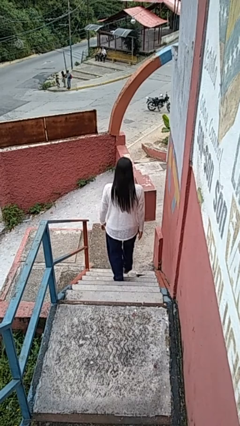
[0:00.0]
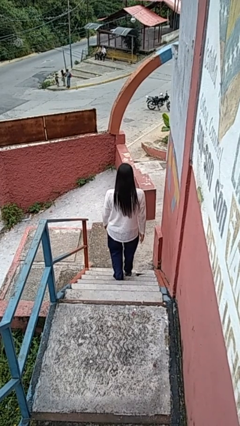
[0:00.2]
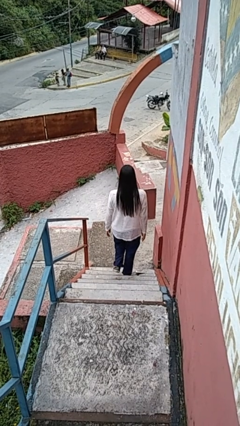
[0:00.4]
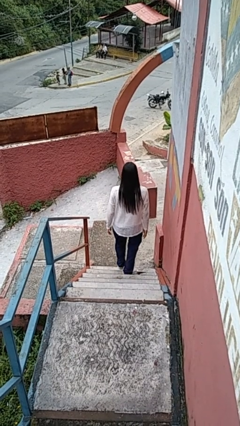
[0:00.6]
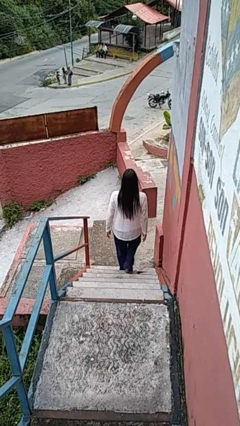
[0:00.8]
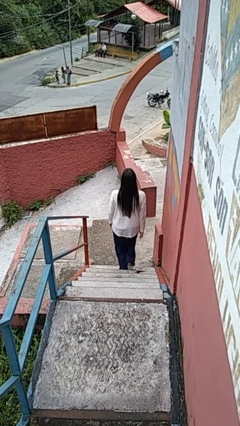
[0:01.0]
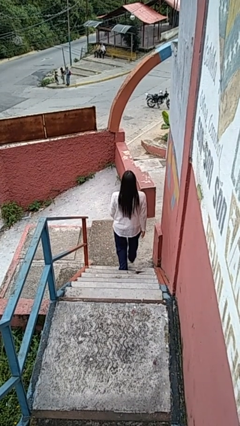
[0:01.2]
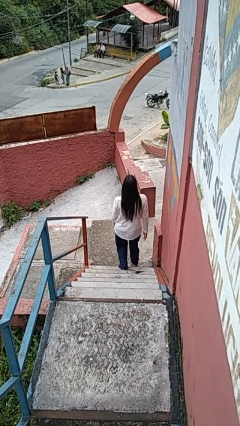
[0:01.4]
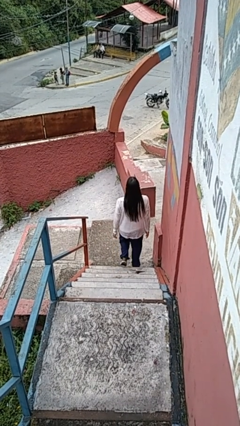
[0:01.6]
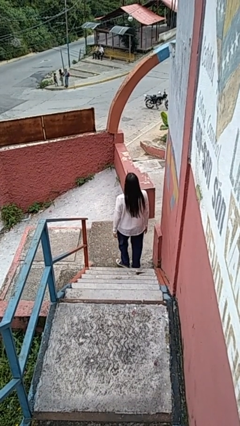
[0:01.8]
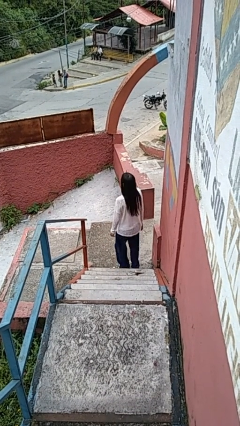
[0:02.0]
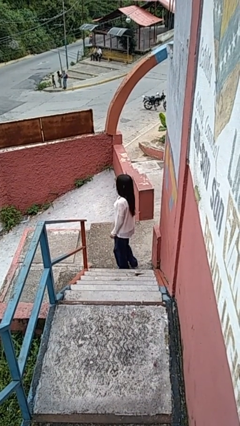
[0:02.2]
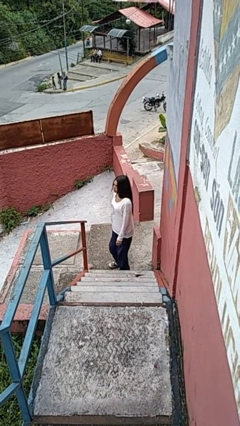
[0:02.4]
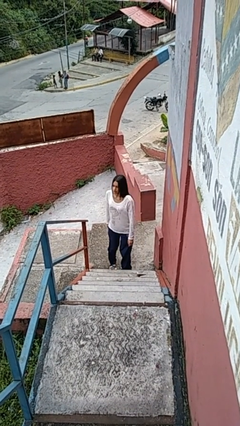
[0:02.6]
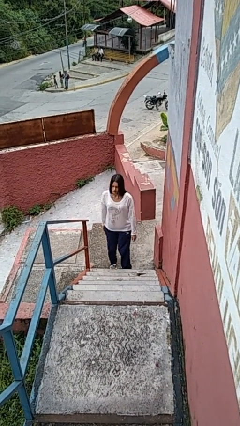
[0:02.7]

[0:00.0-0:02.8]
person climbs down stairs

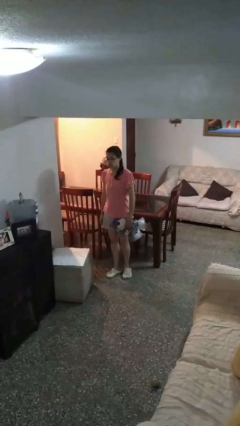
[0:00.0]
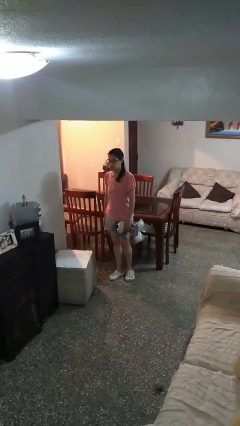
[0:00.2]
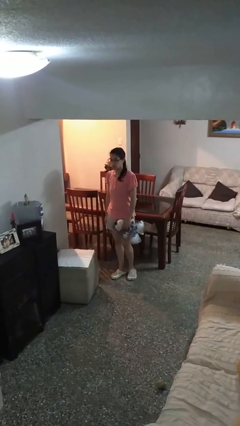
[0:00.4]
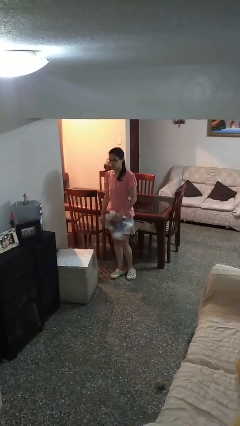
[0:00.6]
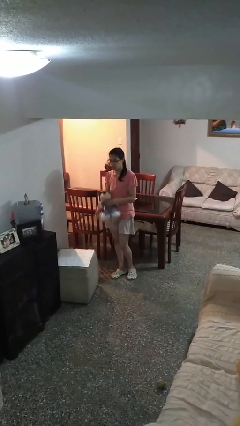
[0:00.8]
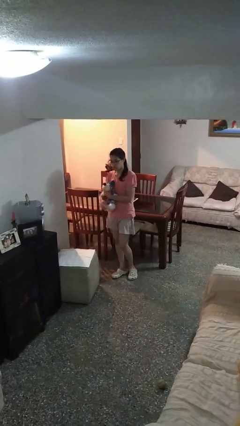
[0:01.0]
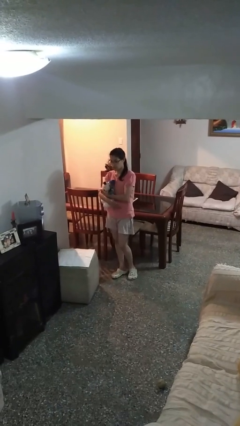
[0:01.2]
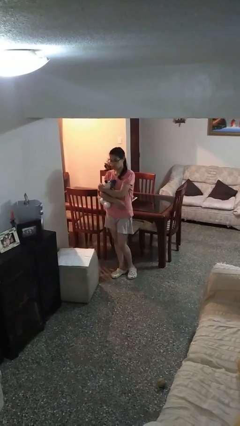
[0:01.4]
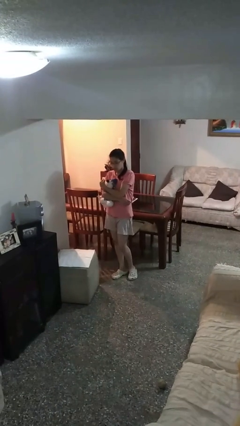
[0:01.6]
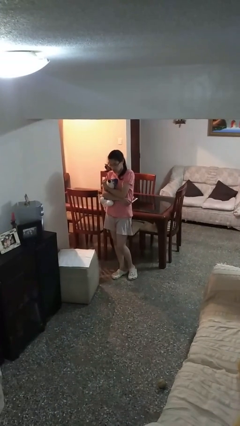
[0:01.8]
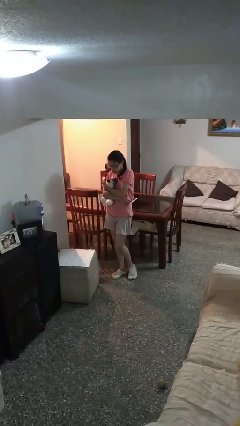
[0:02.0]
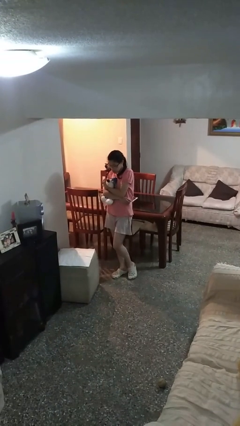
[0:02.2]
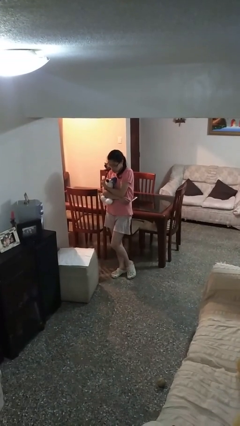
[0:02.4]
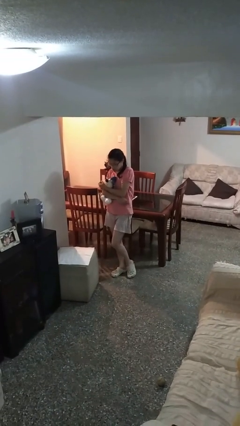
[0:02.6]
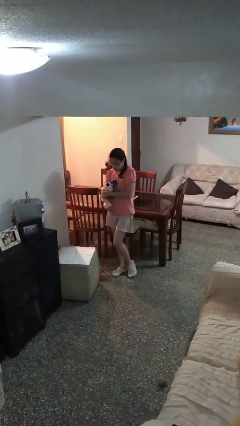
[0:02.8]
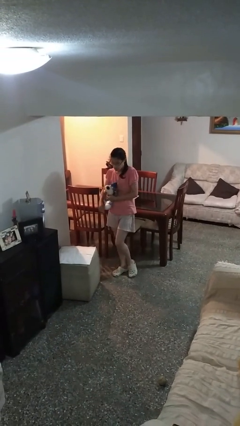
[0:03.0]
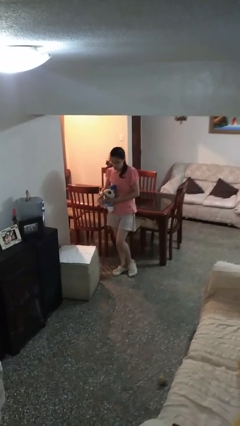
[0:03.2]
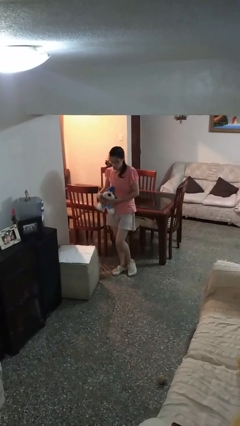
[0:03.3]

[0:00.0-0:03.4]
person hugs stuffed animal

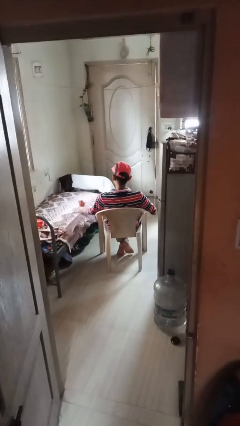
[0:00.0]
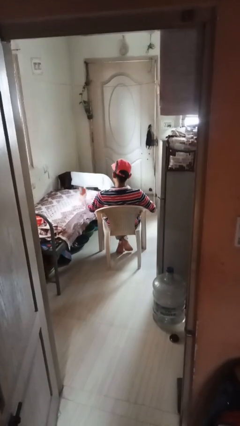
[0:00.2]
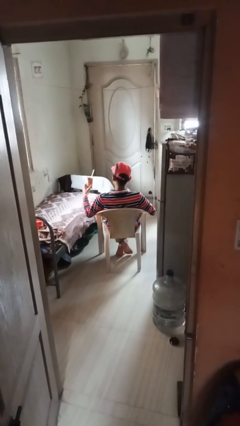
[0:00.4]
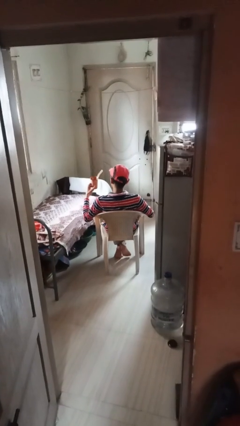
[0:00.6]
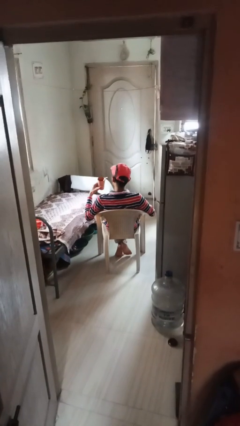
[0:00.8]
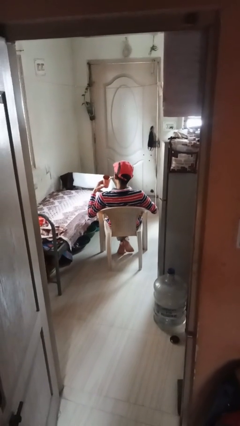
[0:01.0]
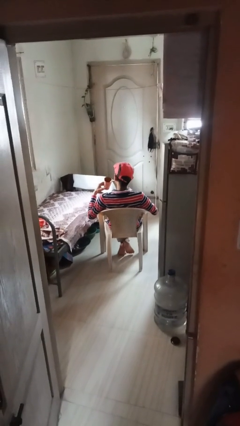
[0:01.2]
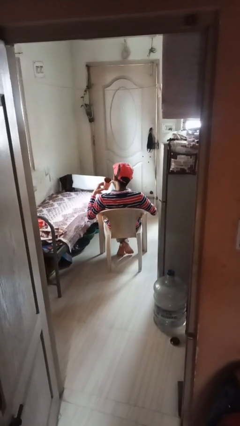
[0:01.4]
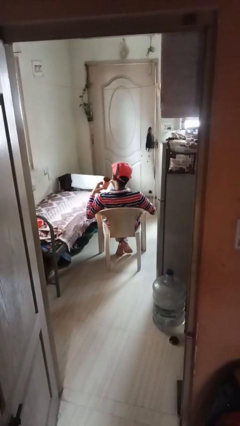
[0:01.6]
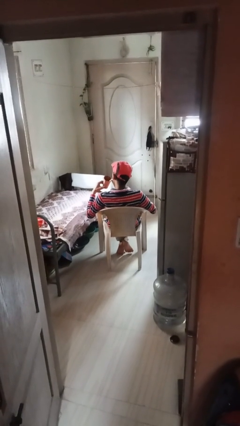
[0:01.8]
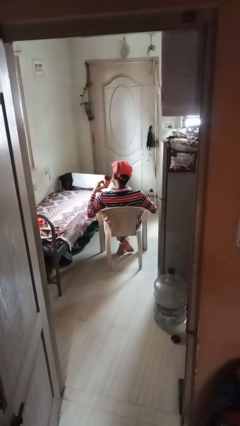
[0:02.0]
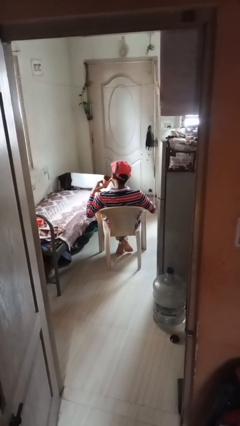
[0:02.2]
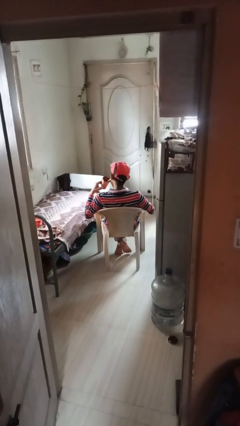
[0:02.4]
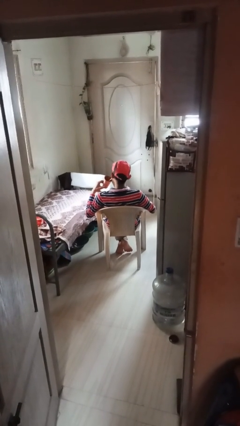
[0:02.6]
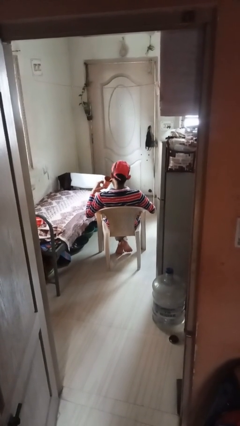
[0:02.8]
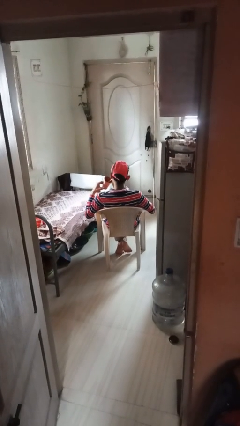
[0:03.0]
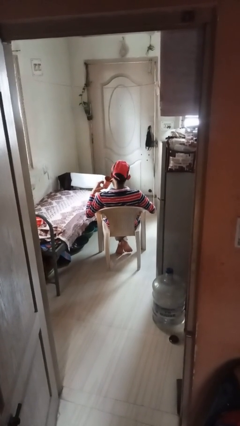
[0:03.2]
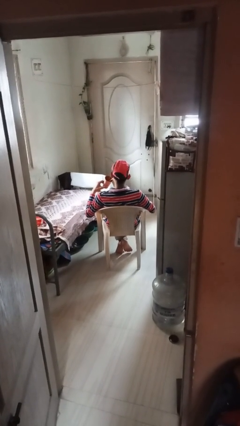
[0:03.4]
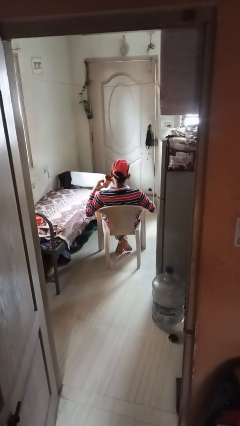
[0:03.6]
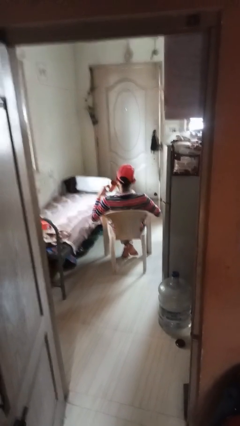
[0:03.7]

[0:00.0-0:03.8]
person drinks from straw

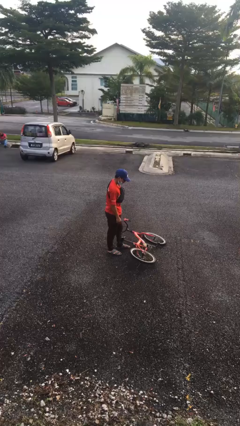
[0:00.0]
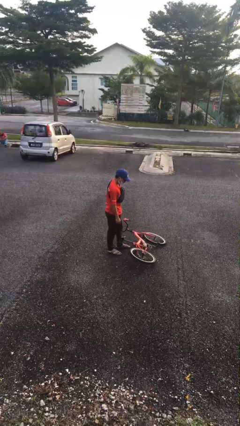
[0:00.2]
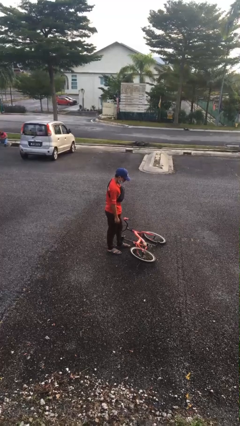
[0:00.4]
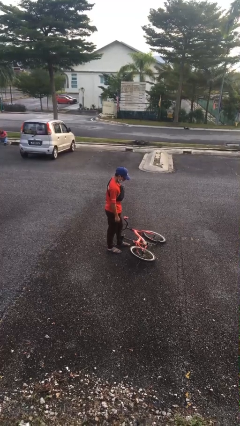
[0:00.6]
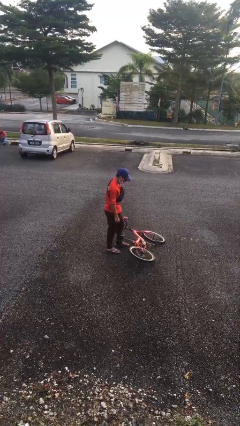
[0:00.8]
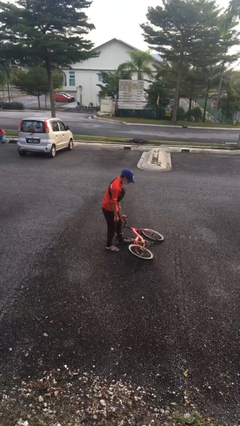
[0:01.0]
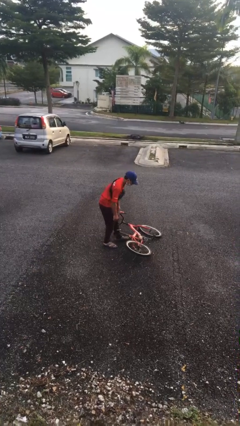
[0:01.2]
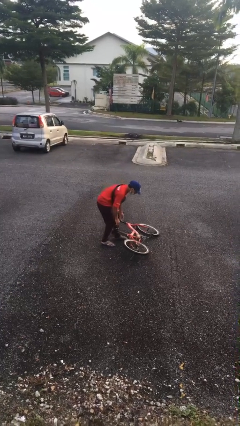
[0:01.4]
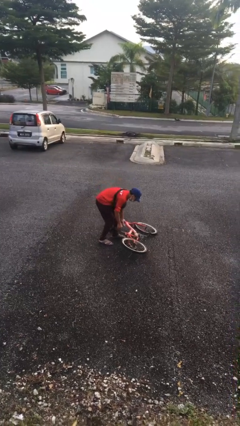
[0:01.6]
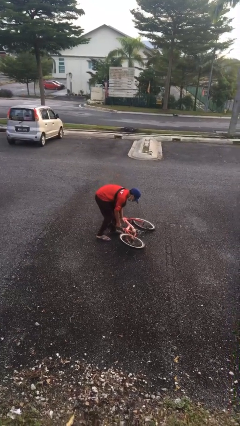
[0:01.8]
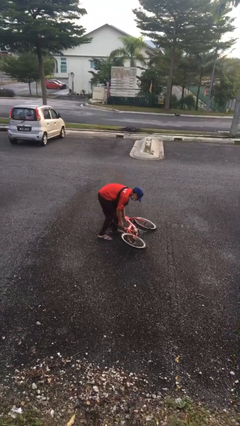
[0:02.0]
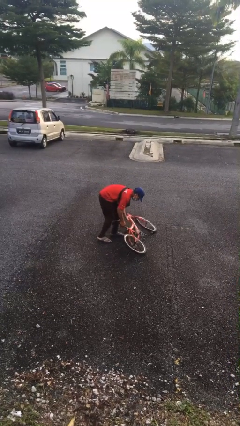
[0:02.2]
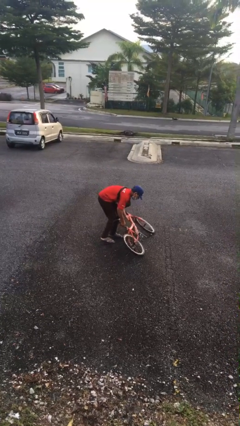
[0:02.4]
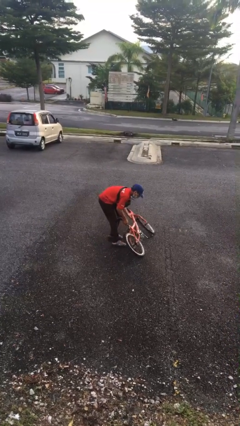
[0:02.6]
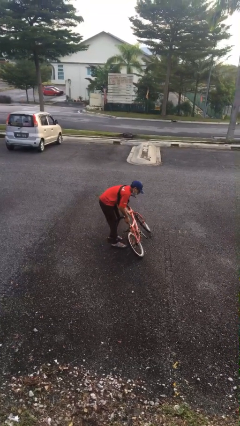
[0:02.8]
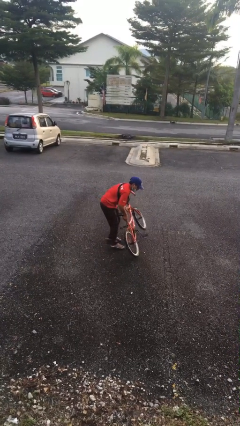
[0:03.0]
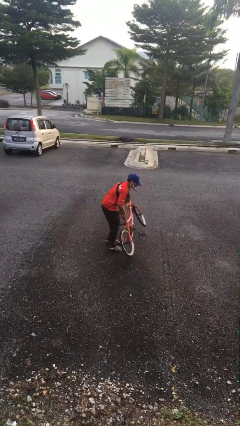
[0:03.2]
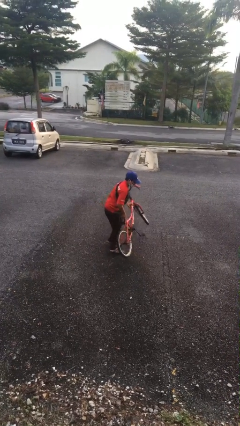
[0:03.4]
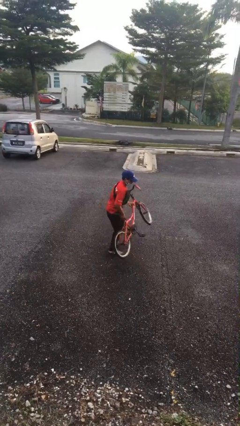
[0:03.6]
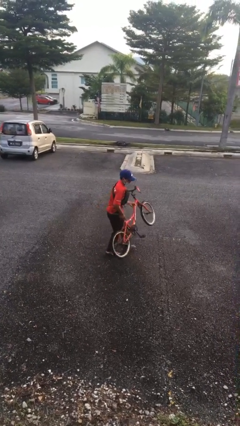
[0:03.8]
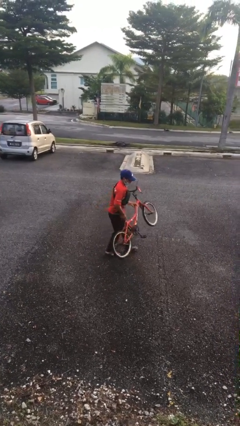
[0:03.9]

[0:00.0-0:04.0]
person picks up object from floor

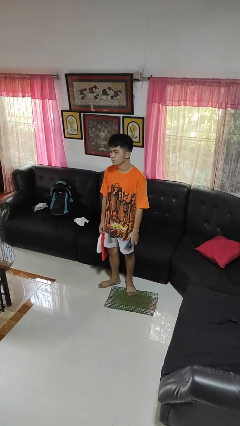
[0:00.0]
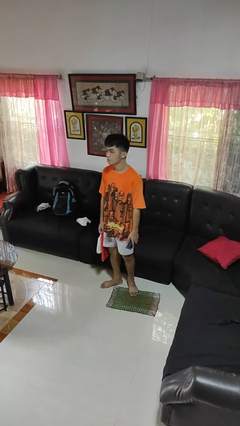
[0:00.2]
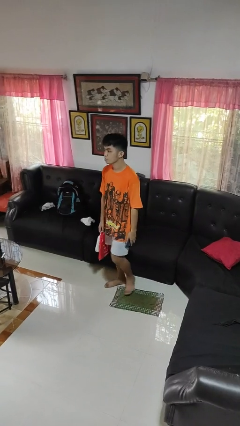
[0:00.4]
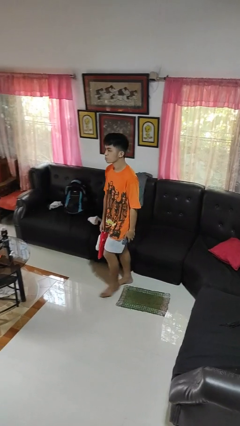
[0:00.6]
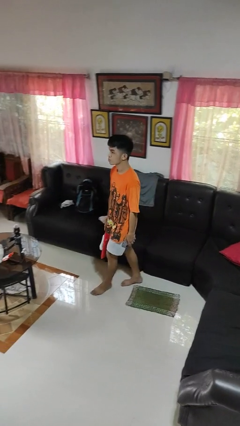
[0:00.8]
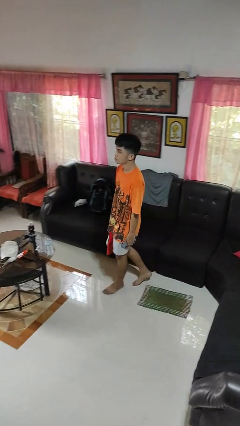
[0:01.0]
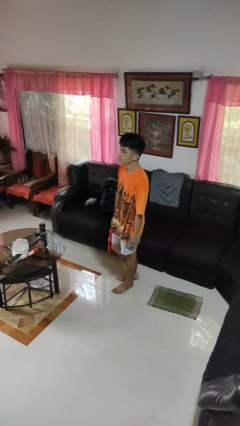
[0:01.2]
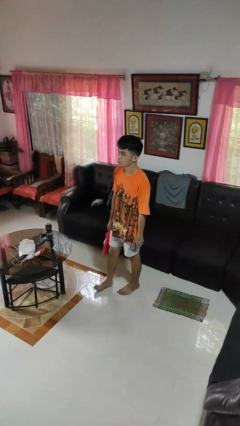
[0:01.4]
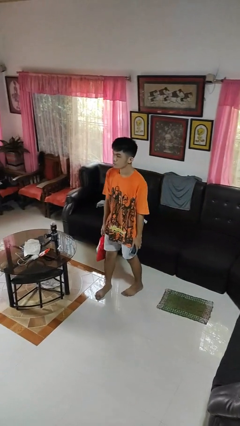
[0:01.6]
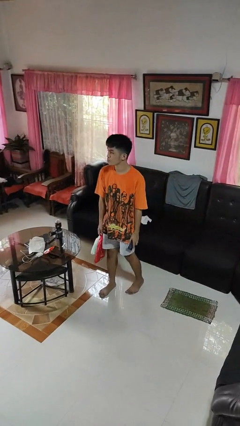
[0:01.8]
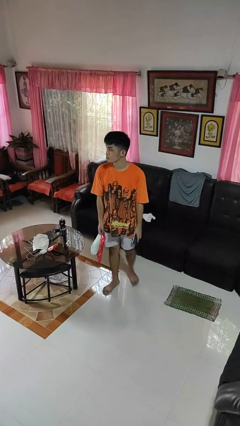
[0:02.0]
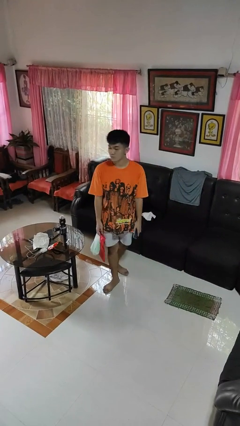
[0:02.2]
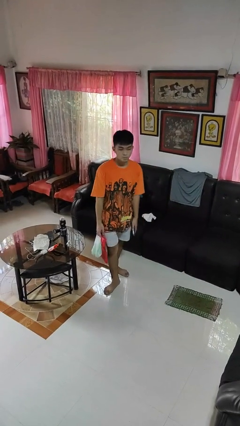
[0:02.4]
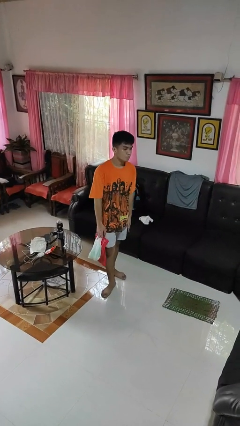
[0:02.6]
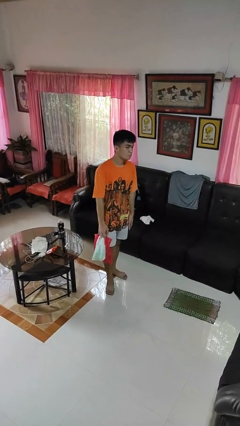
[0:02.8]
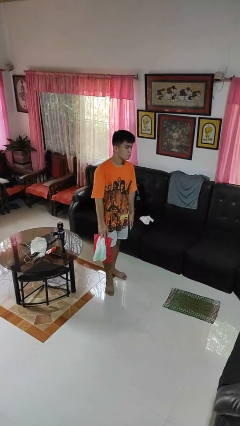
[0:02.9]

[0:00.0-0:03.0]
person carries groceries

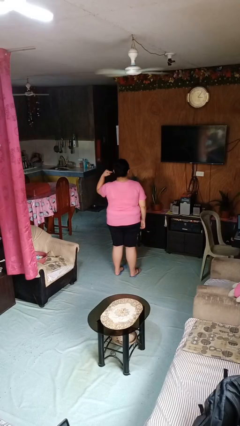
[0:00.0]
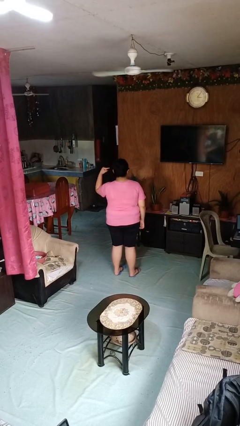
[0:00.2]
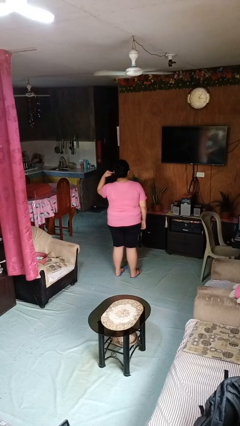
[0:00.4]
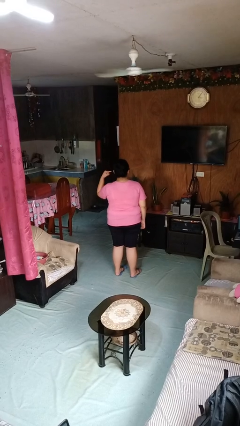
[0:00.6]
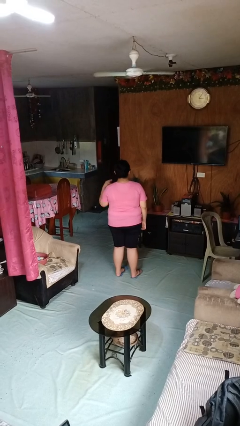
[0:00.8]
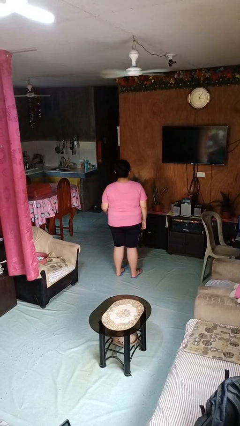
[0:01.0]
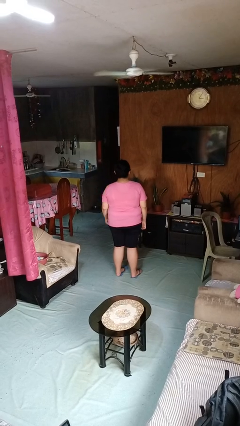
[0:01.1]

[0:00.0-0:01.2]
person gestures listen closely
